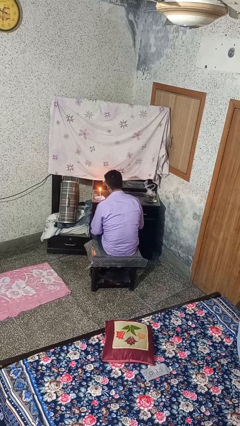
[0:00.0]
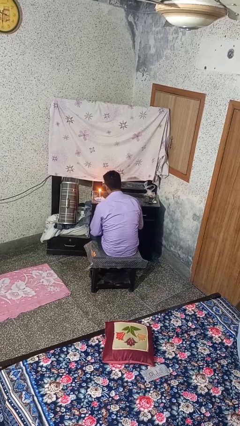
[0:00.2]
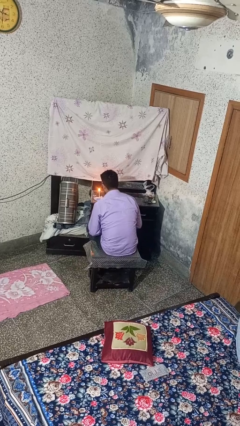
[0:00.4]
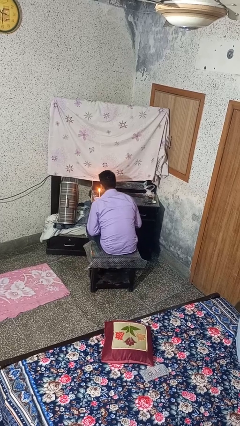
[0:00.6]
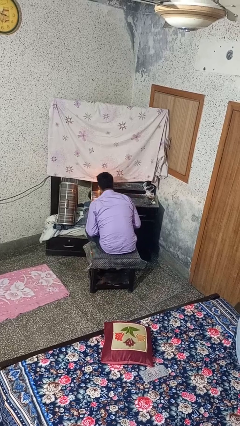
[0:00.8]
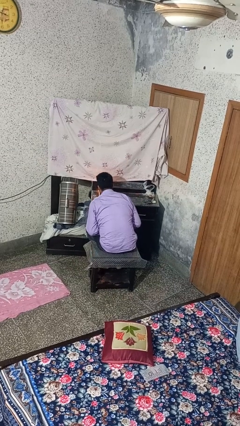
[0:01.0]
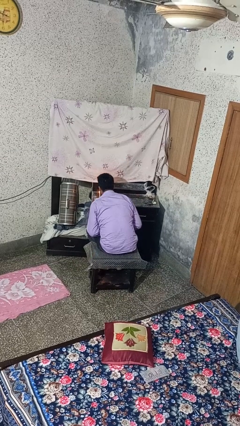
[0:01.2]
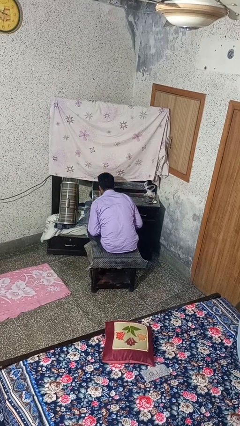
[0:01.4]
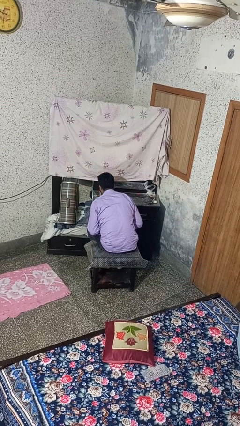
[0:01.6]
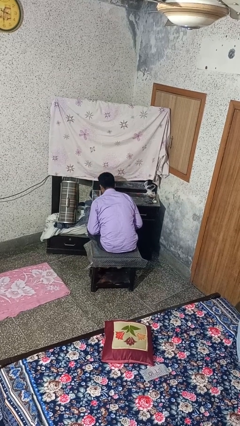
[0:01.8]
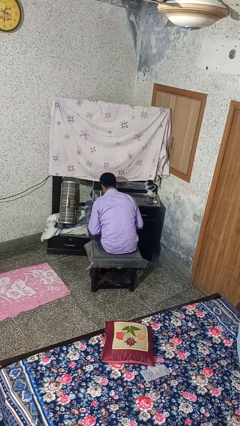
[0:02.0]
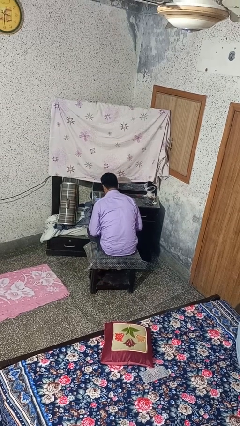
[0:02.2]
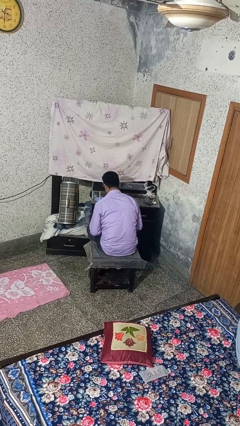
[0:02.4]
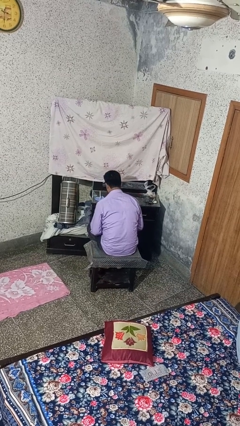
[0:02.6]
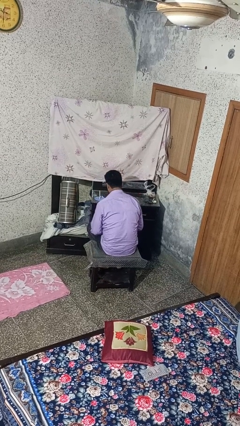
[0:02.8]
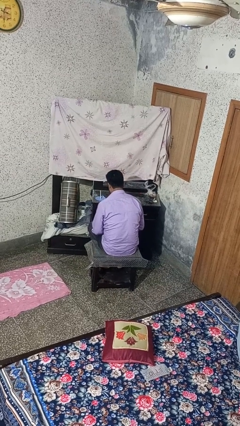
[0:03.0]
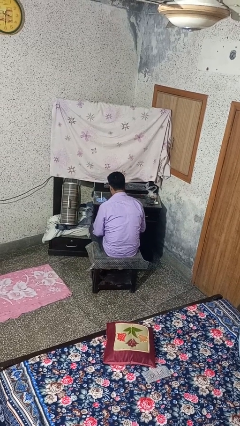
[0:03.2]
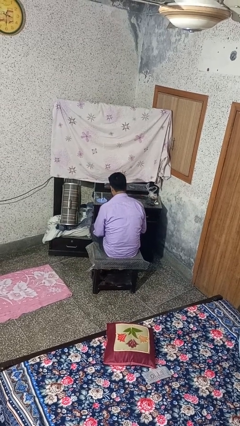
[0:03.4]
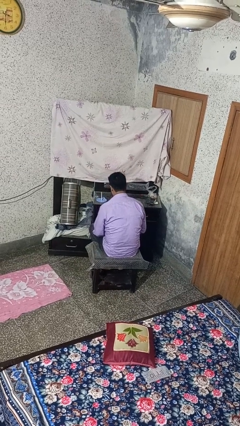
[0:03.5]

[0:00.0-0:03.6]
person extinguishes candle

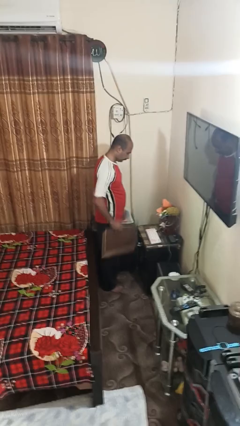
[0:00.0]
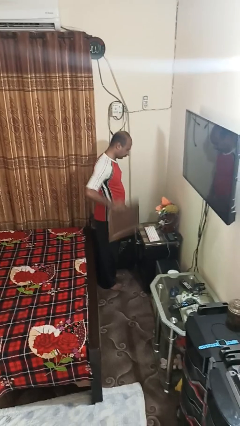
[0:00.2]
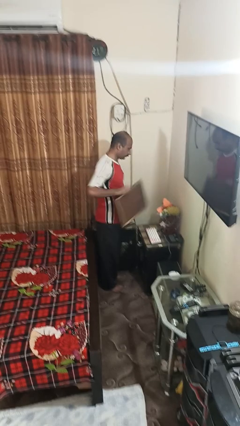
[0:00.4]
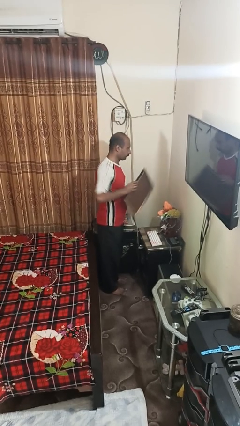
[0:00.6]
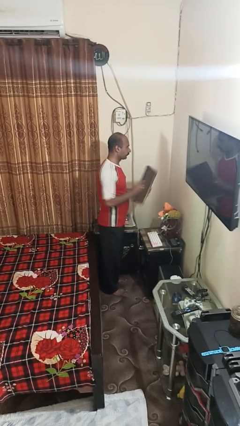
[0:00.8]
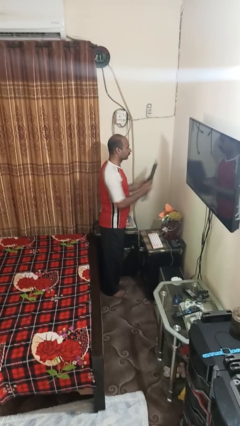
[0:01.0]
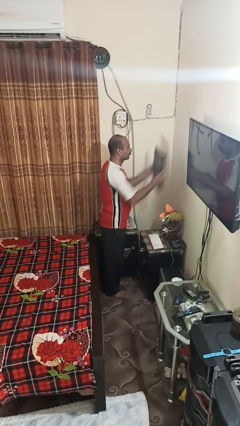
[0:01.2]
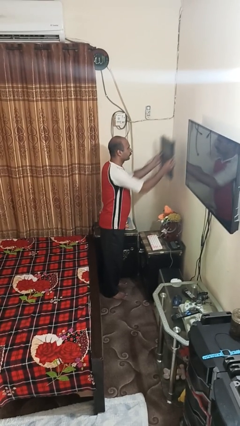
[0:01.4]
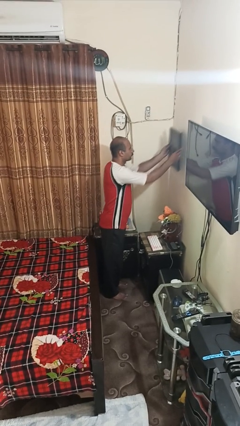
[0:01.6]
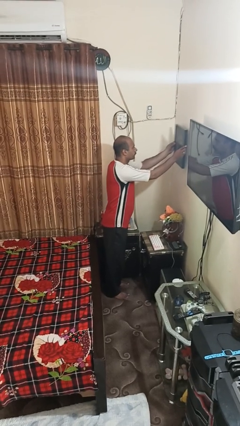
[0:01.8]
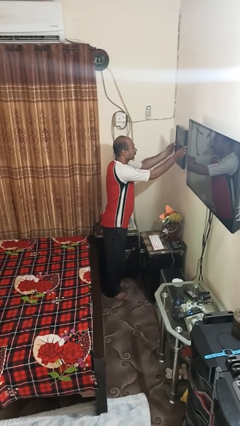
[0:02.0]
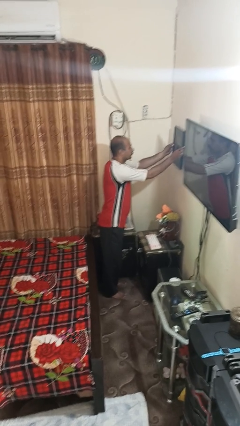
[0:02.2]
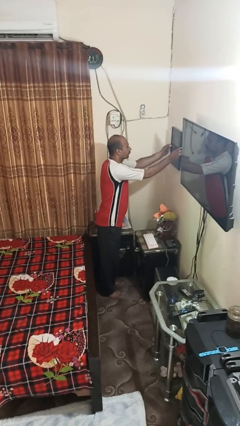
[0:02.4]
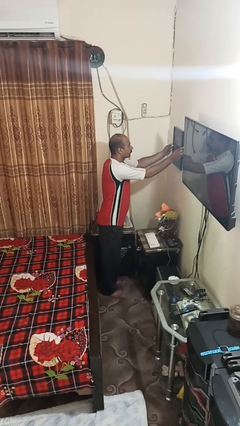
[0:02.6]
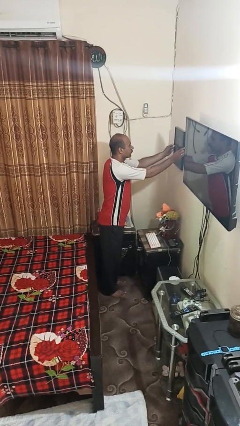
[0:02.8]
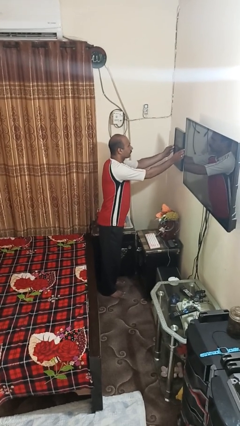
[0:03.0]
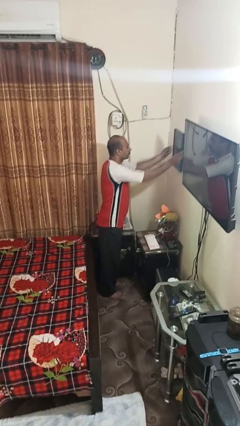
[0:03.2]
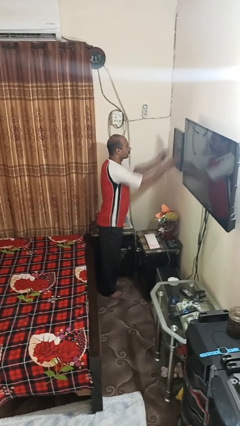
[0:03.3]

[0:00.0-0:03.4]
person puts up picture frame

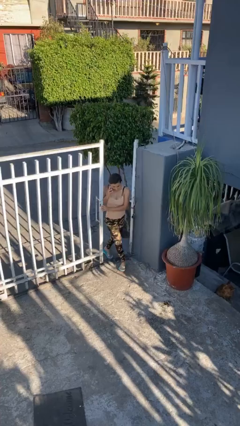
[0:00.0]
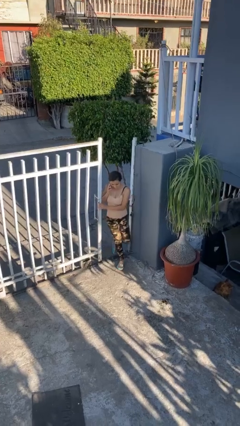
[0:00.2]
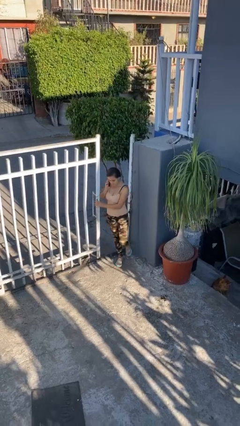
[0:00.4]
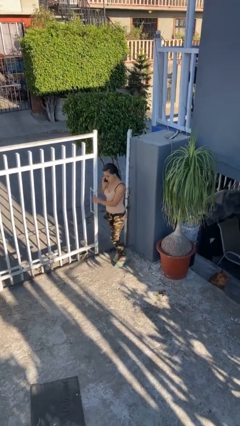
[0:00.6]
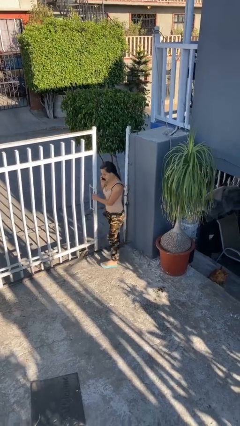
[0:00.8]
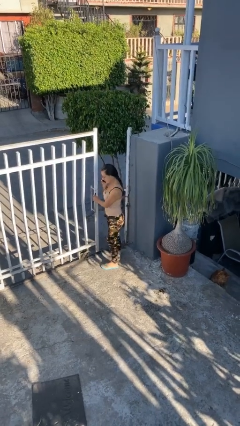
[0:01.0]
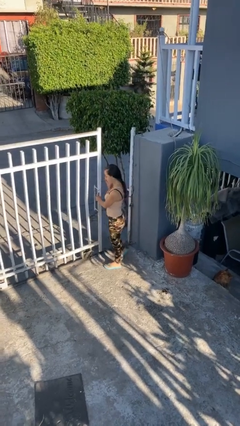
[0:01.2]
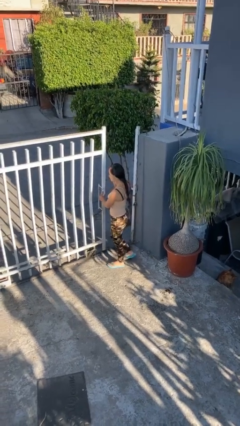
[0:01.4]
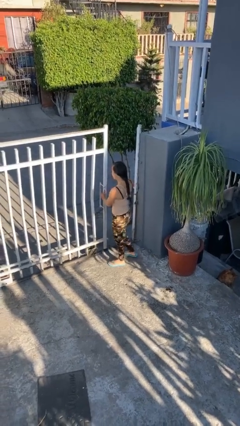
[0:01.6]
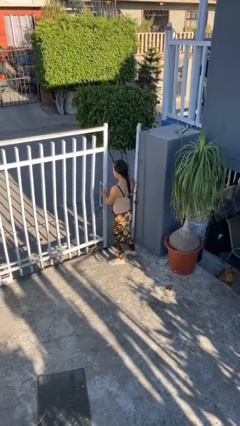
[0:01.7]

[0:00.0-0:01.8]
person enters scene through structure

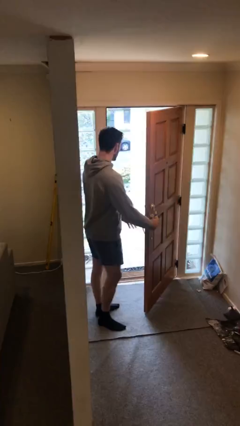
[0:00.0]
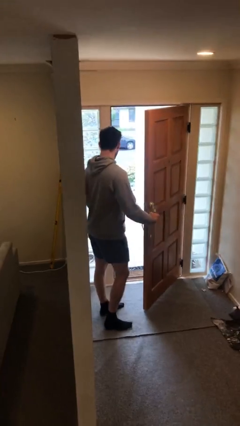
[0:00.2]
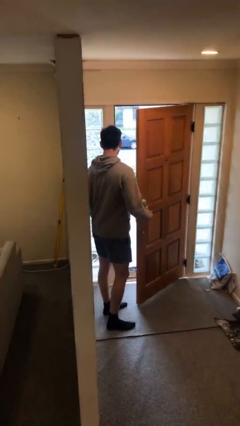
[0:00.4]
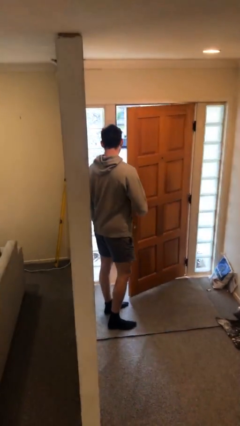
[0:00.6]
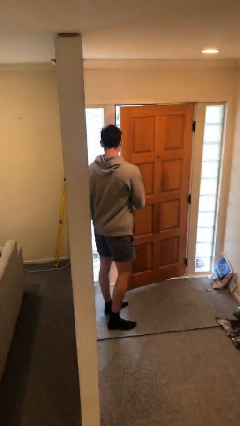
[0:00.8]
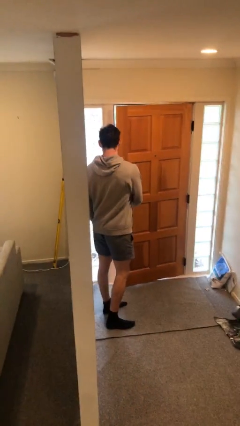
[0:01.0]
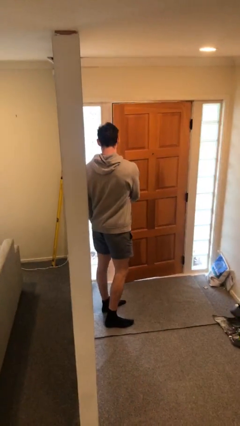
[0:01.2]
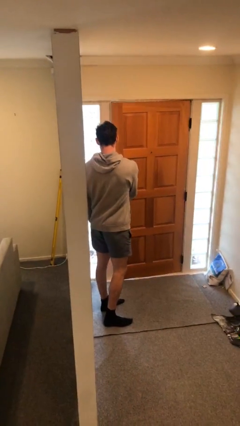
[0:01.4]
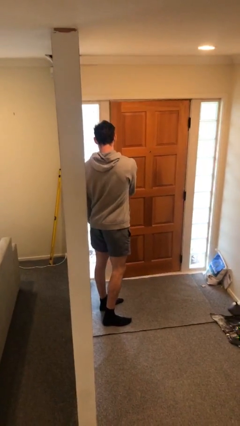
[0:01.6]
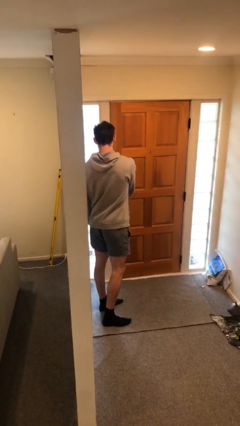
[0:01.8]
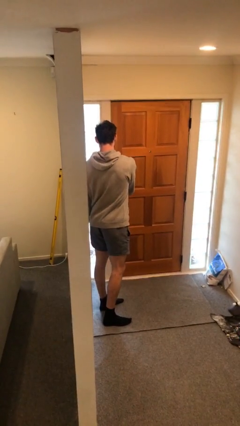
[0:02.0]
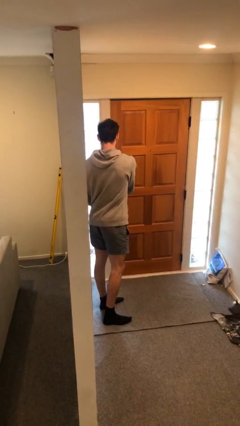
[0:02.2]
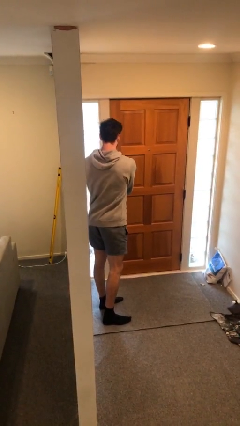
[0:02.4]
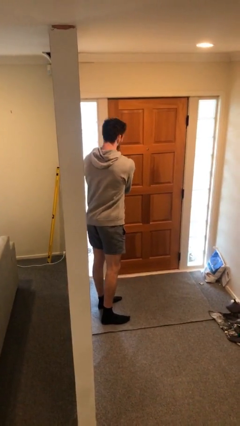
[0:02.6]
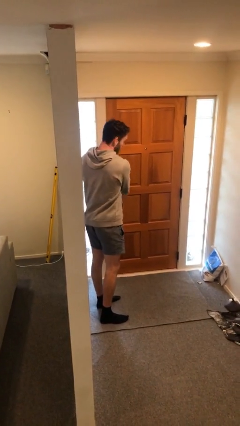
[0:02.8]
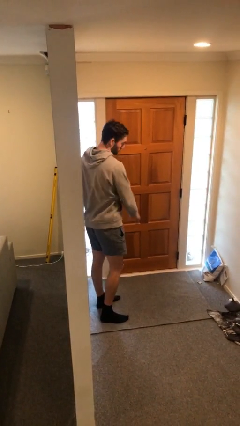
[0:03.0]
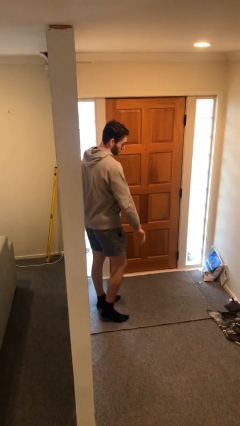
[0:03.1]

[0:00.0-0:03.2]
person closes facility door

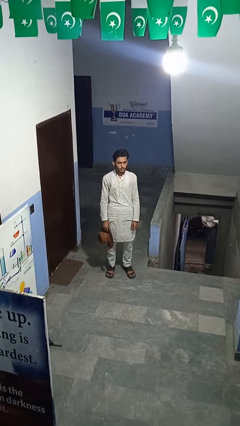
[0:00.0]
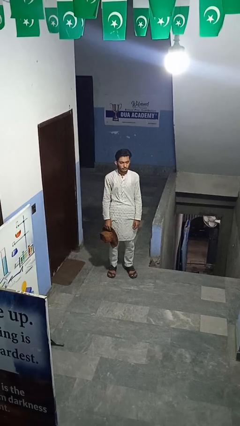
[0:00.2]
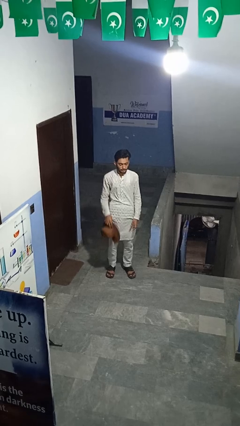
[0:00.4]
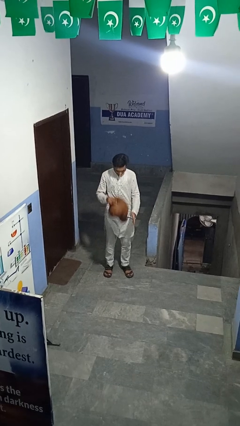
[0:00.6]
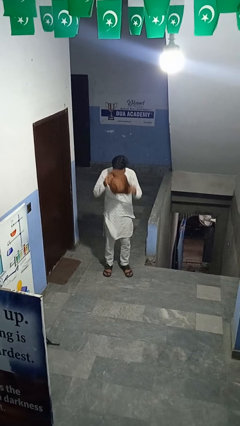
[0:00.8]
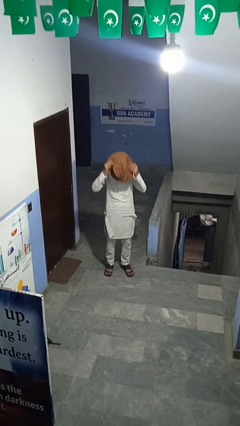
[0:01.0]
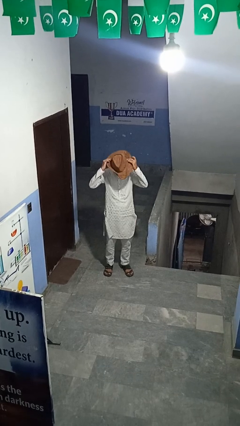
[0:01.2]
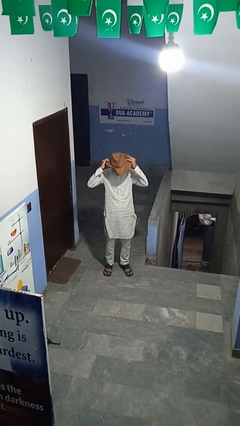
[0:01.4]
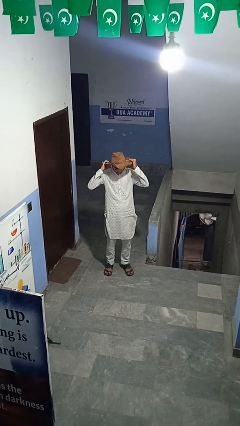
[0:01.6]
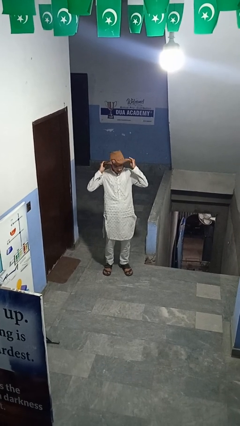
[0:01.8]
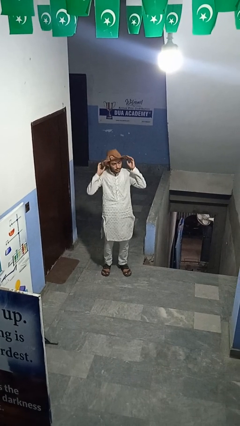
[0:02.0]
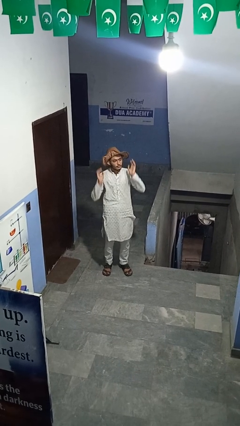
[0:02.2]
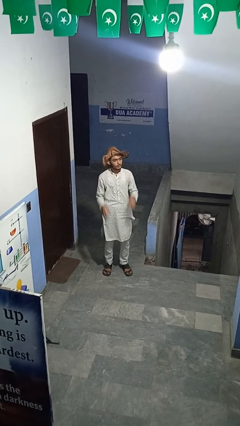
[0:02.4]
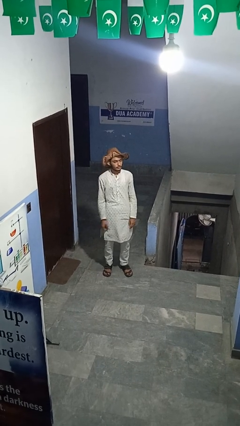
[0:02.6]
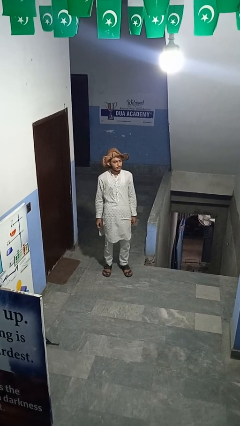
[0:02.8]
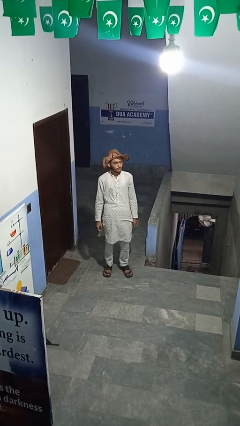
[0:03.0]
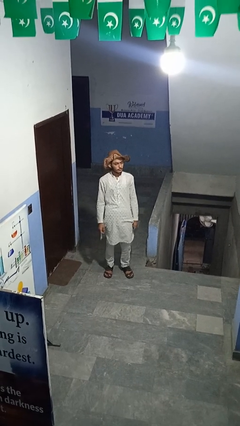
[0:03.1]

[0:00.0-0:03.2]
person puts on hat

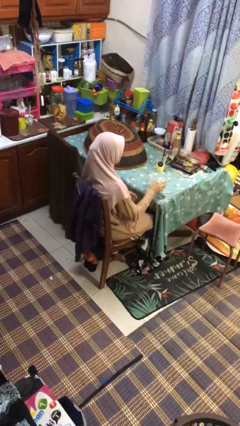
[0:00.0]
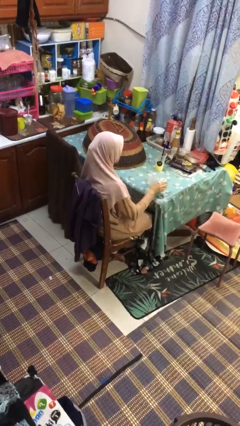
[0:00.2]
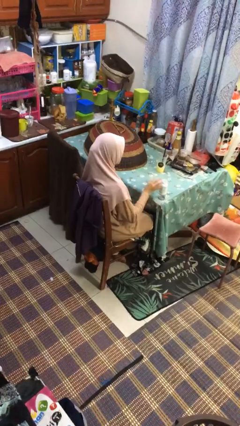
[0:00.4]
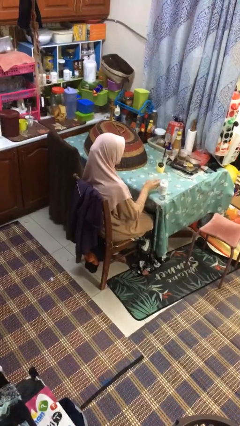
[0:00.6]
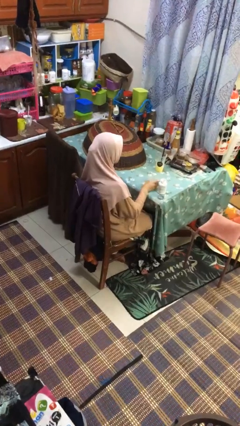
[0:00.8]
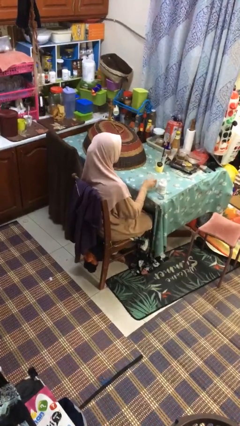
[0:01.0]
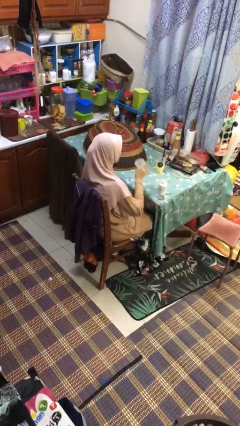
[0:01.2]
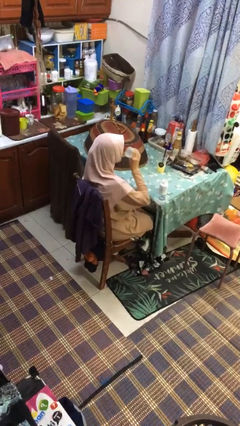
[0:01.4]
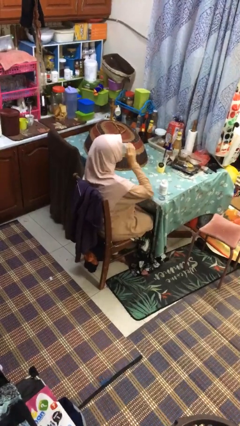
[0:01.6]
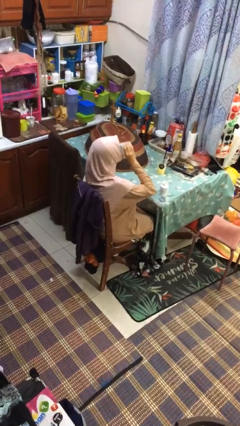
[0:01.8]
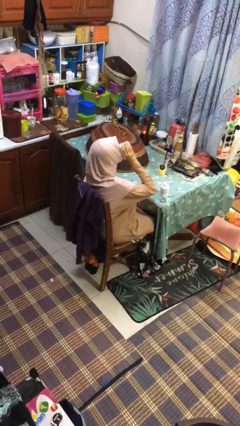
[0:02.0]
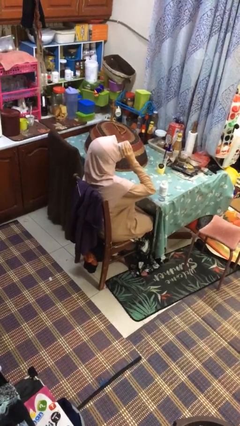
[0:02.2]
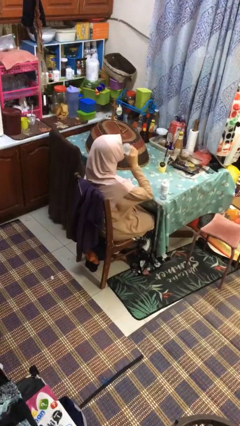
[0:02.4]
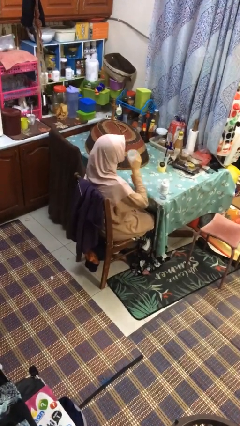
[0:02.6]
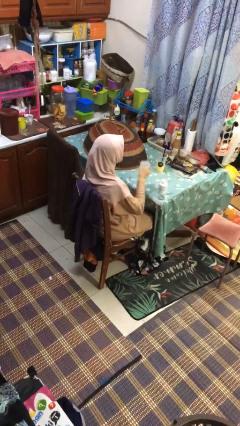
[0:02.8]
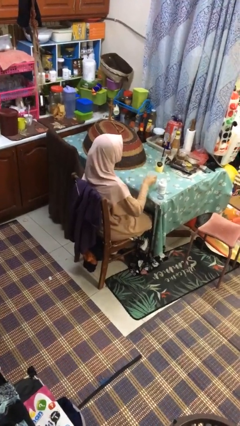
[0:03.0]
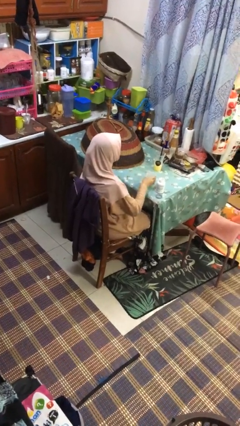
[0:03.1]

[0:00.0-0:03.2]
person drinks from cup
